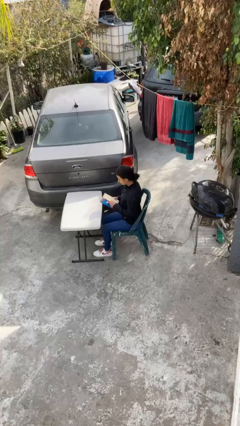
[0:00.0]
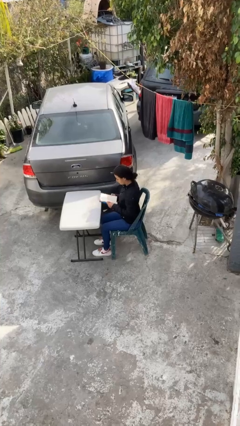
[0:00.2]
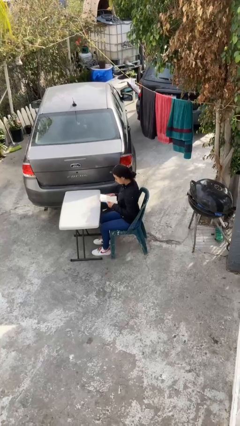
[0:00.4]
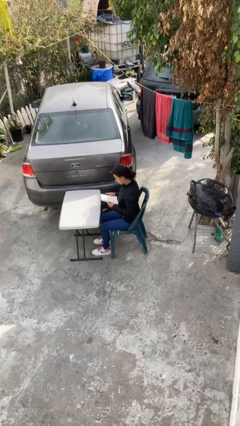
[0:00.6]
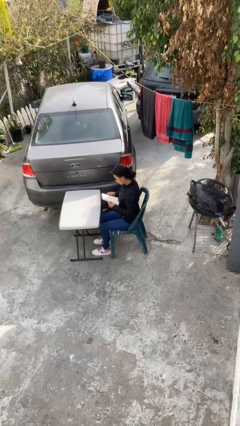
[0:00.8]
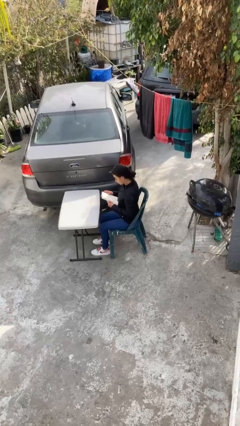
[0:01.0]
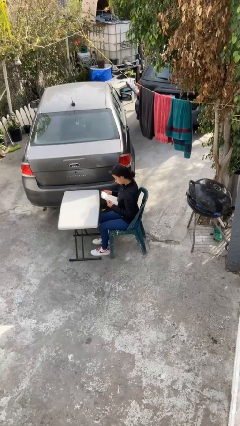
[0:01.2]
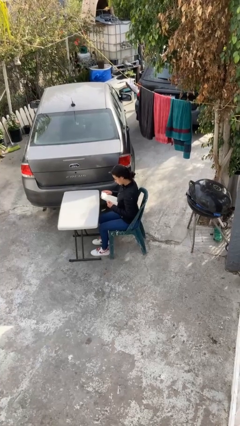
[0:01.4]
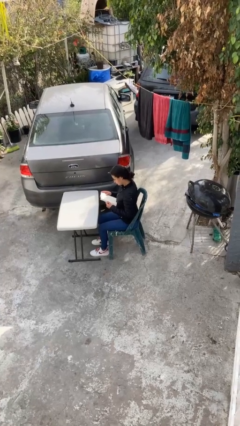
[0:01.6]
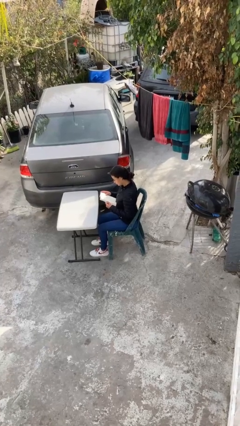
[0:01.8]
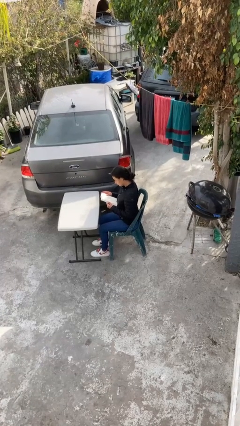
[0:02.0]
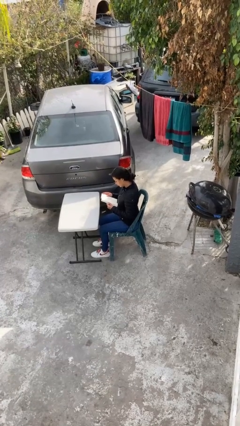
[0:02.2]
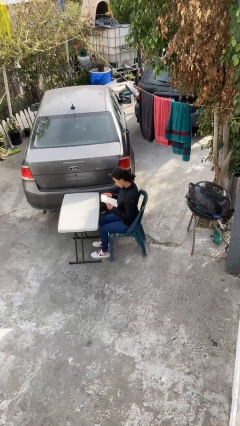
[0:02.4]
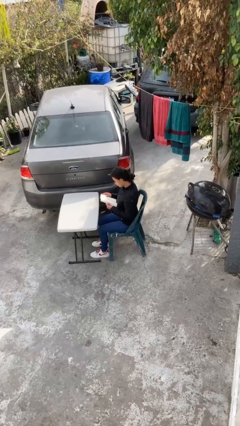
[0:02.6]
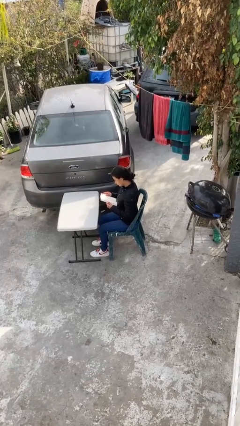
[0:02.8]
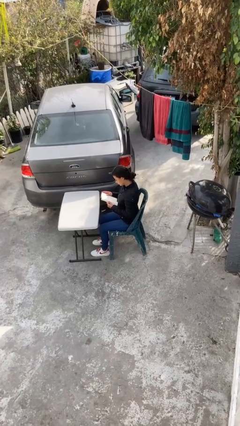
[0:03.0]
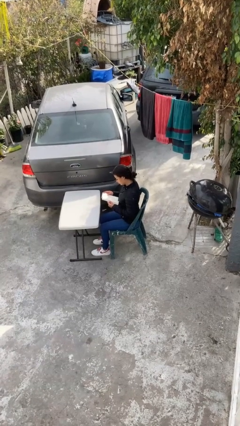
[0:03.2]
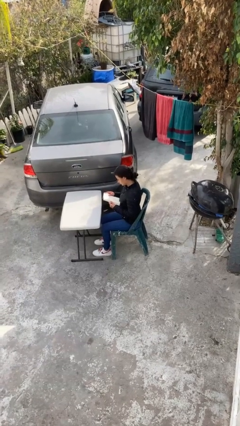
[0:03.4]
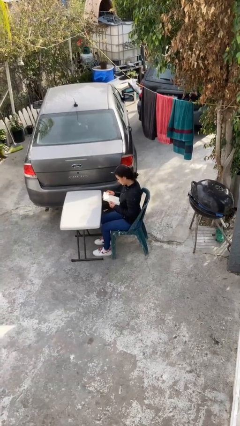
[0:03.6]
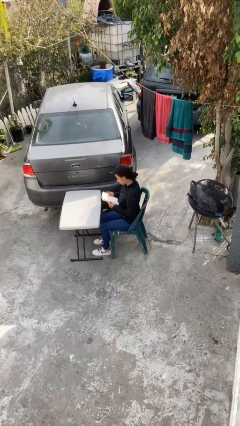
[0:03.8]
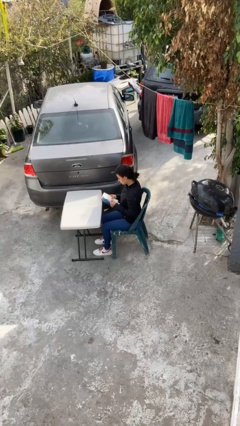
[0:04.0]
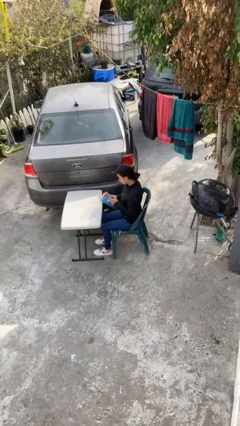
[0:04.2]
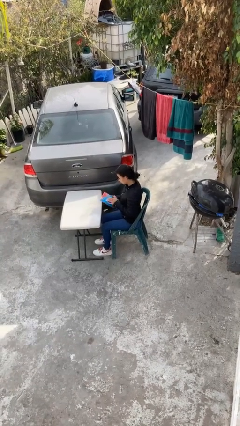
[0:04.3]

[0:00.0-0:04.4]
person reads document

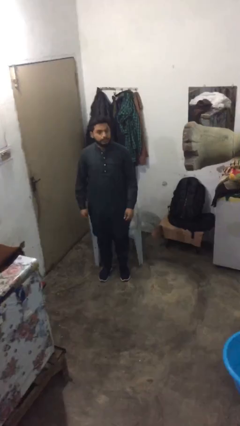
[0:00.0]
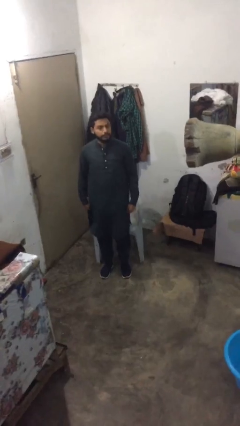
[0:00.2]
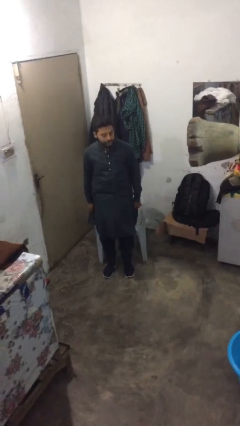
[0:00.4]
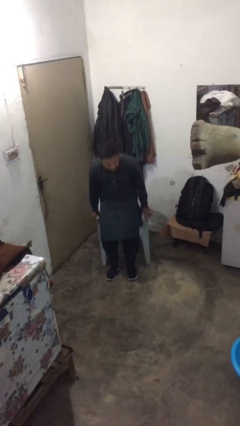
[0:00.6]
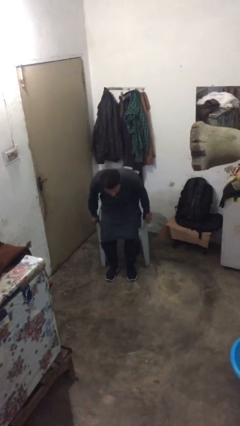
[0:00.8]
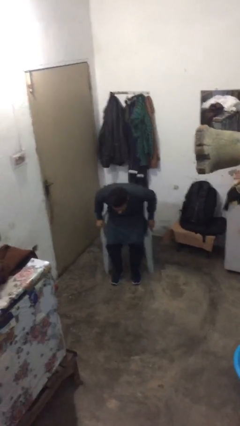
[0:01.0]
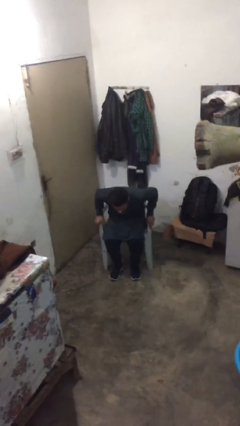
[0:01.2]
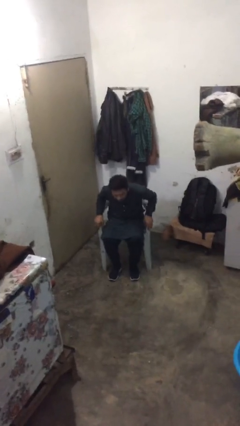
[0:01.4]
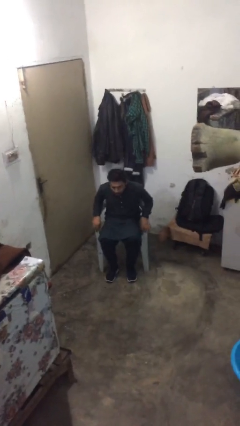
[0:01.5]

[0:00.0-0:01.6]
person sits down

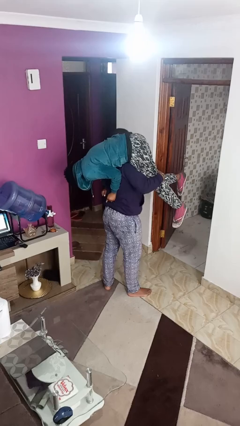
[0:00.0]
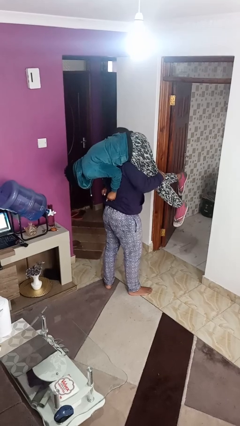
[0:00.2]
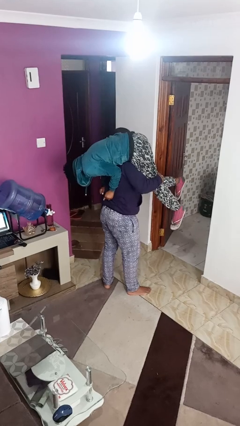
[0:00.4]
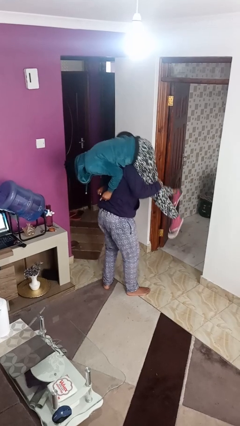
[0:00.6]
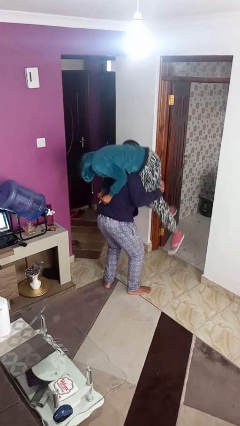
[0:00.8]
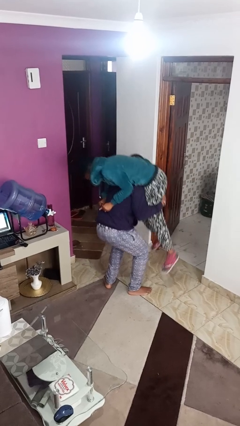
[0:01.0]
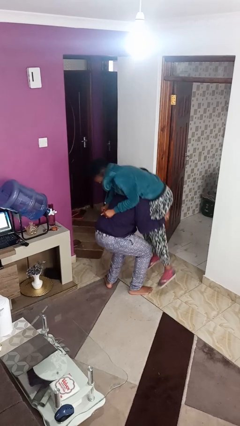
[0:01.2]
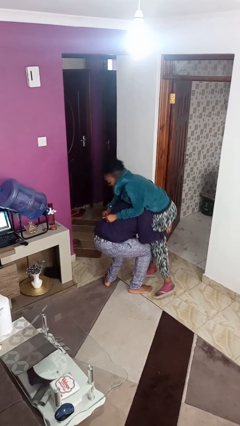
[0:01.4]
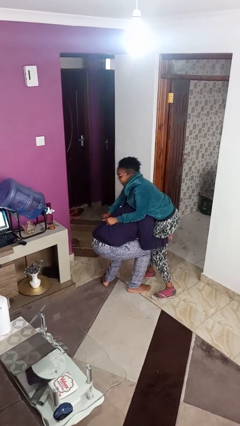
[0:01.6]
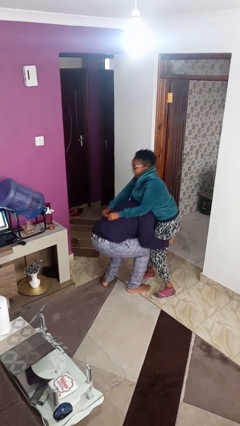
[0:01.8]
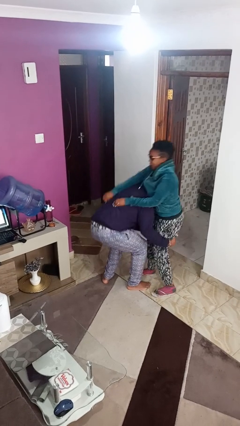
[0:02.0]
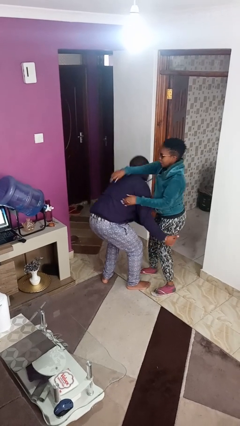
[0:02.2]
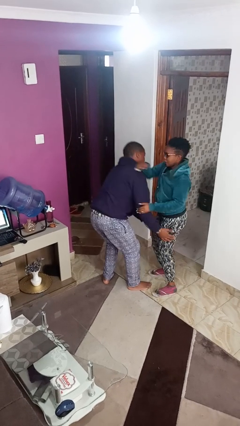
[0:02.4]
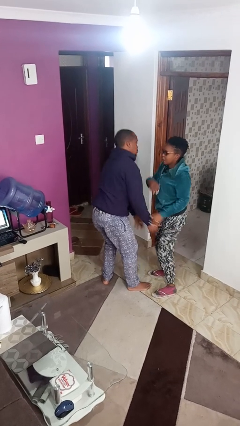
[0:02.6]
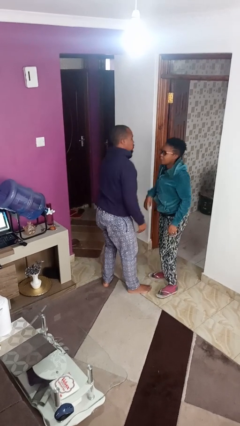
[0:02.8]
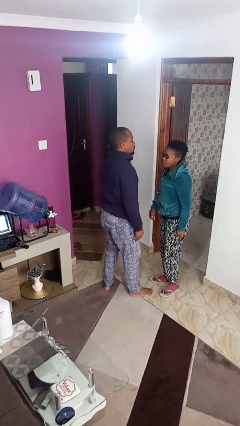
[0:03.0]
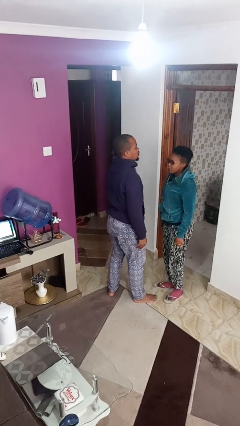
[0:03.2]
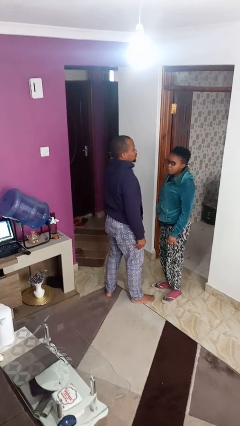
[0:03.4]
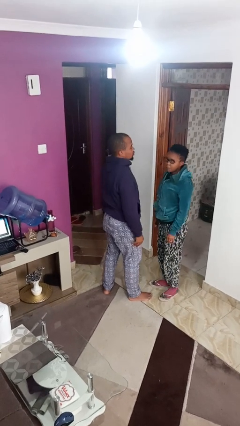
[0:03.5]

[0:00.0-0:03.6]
person puts down person

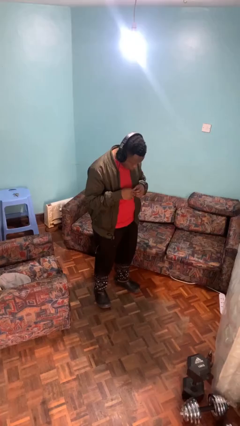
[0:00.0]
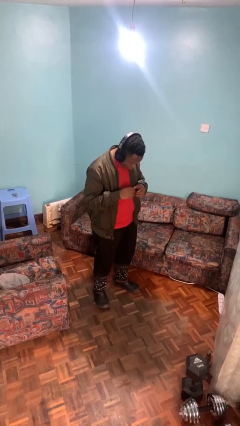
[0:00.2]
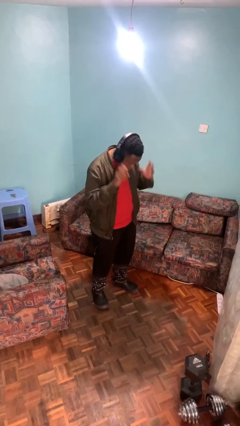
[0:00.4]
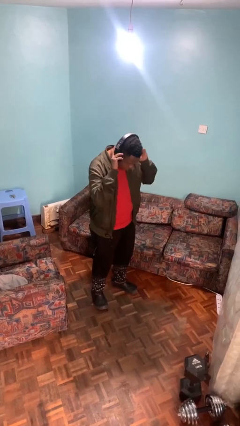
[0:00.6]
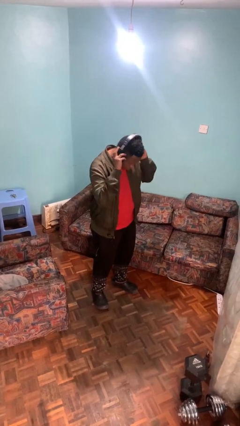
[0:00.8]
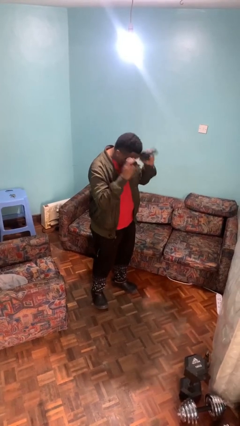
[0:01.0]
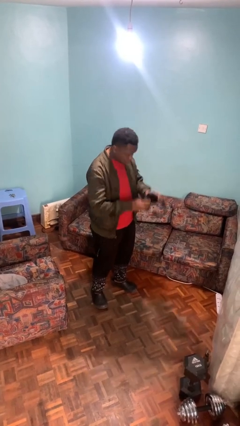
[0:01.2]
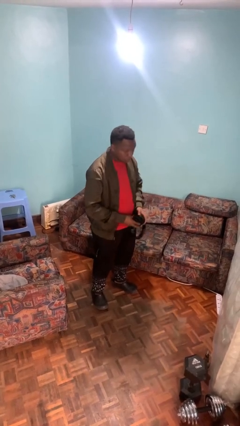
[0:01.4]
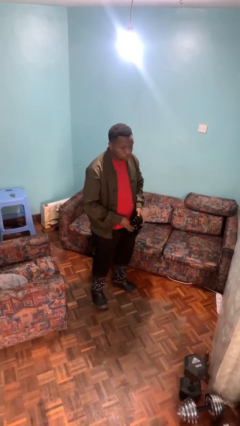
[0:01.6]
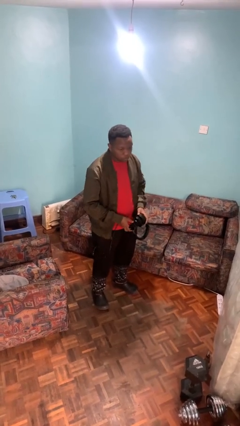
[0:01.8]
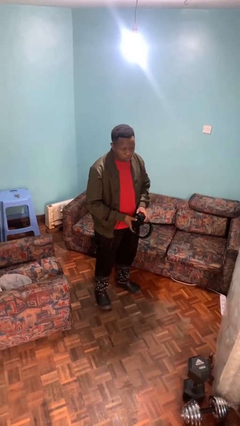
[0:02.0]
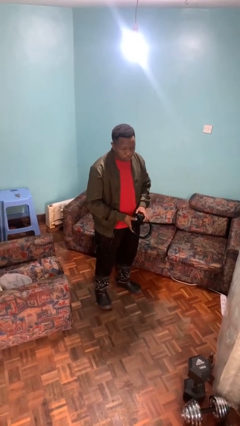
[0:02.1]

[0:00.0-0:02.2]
person takes off headphones

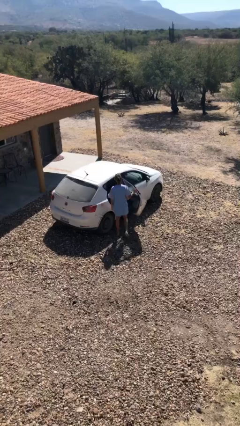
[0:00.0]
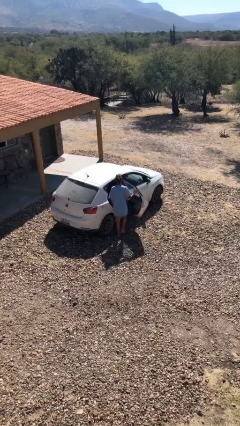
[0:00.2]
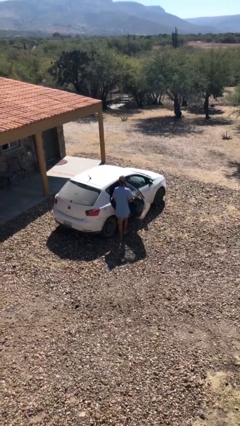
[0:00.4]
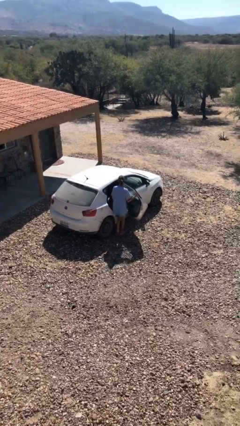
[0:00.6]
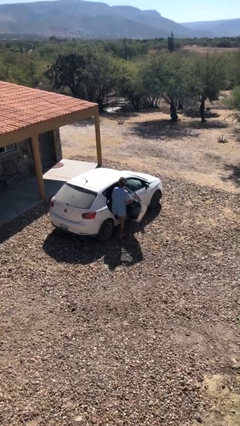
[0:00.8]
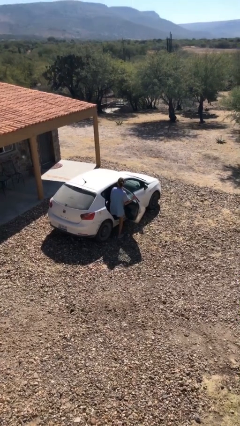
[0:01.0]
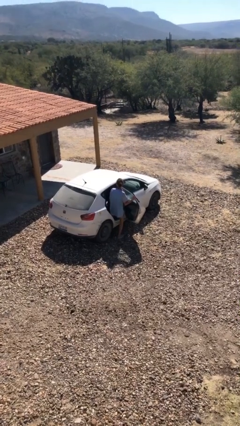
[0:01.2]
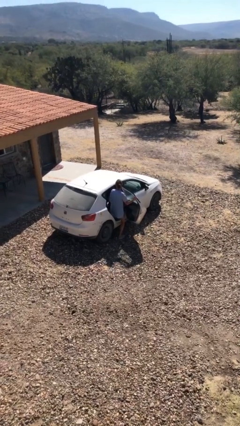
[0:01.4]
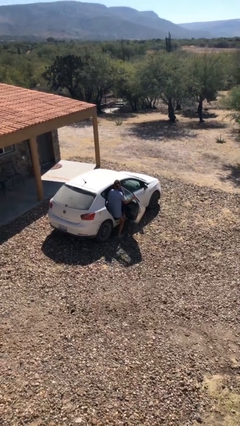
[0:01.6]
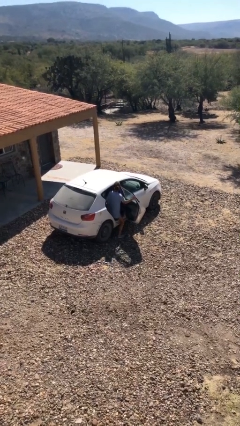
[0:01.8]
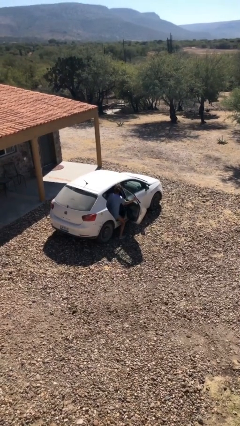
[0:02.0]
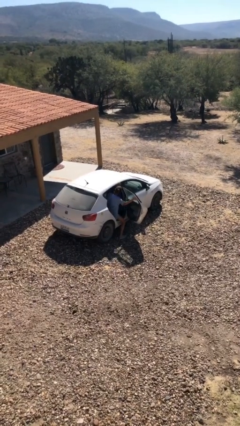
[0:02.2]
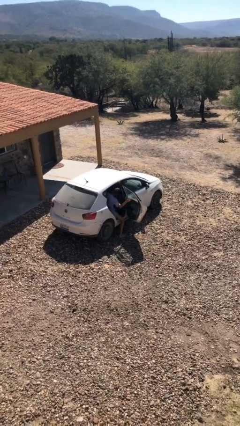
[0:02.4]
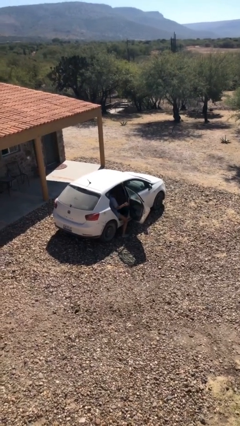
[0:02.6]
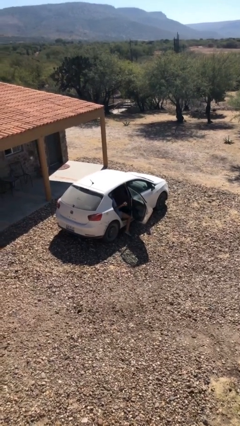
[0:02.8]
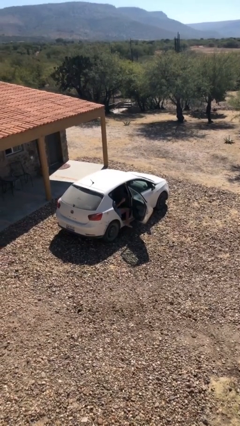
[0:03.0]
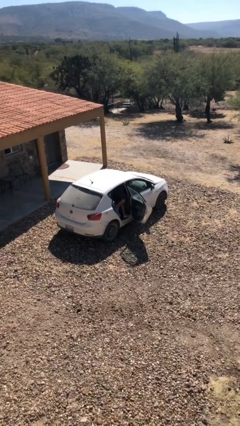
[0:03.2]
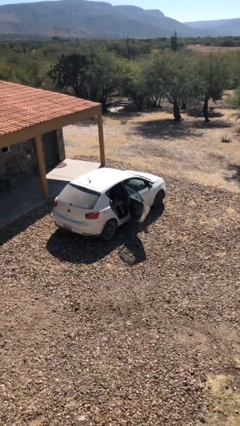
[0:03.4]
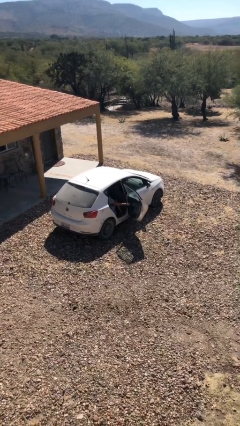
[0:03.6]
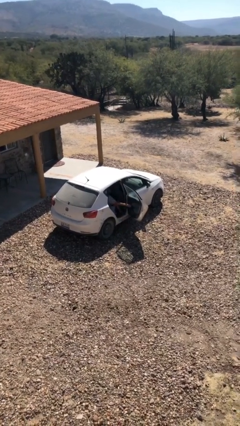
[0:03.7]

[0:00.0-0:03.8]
person enters car

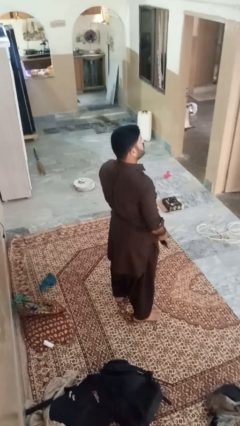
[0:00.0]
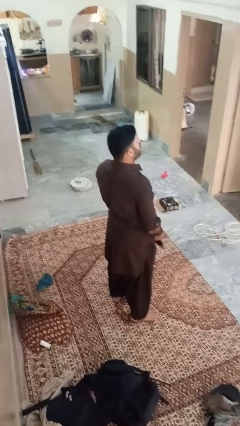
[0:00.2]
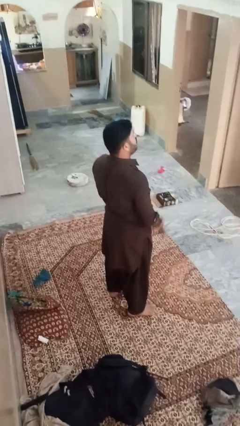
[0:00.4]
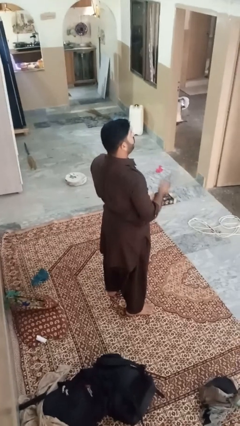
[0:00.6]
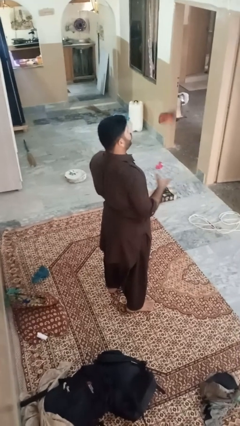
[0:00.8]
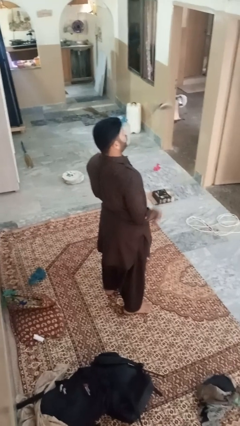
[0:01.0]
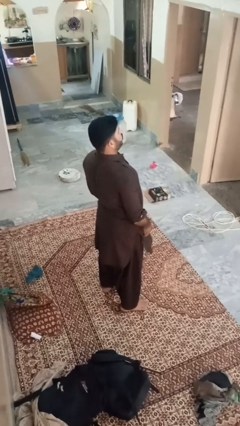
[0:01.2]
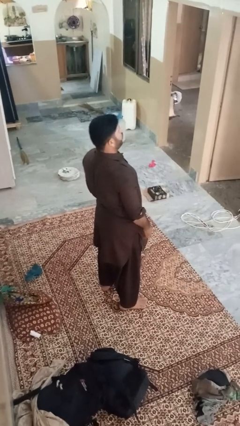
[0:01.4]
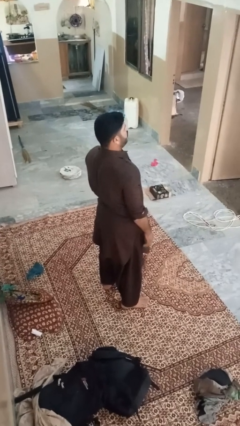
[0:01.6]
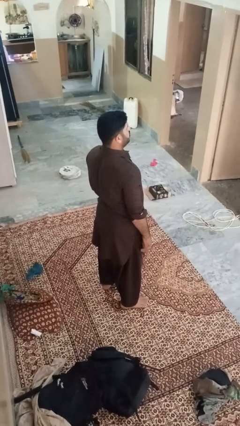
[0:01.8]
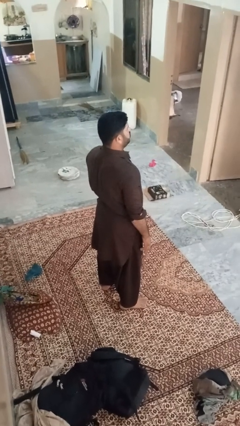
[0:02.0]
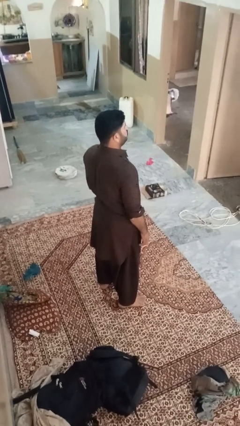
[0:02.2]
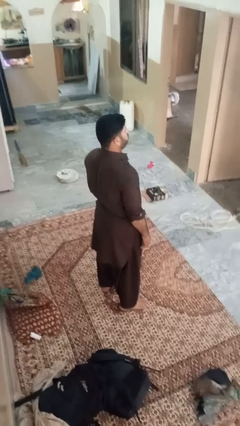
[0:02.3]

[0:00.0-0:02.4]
person throws object into air
